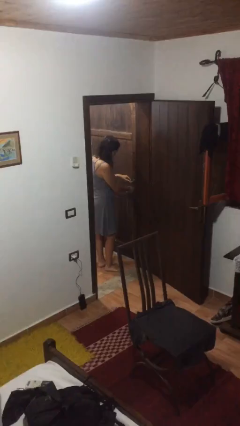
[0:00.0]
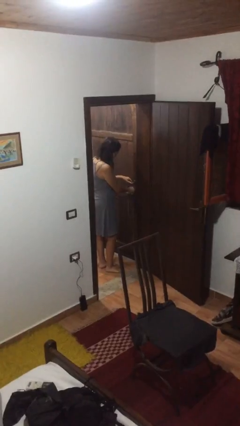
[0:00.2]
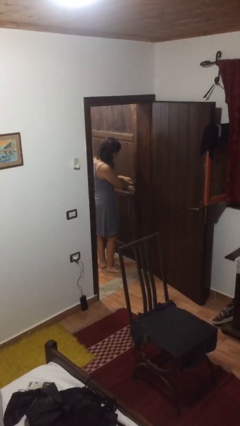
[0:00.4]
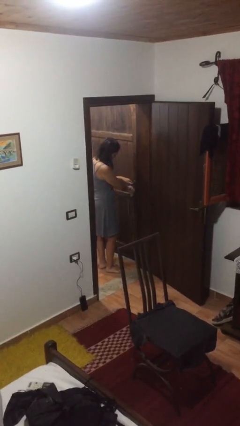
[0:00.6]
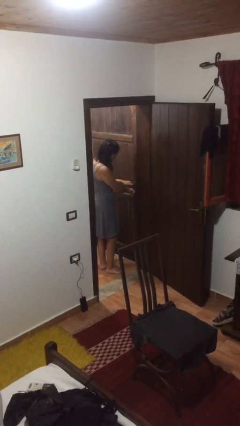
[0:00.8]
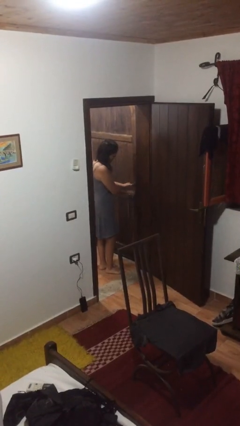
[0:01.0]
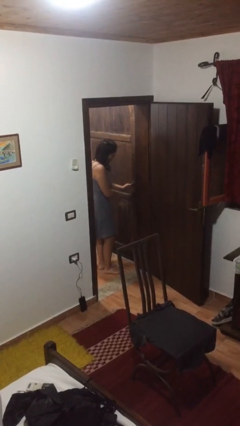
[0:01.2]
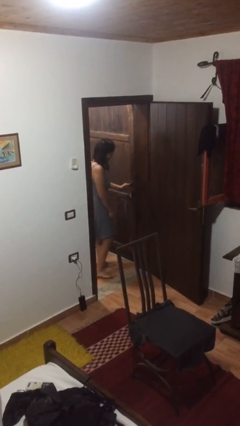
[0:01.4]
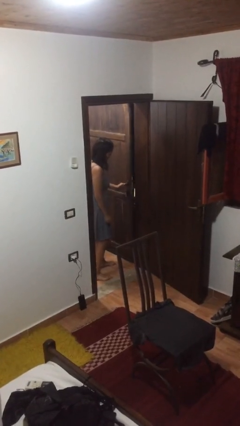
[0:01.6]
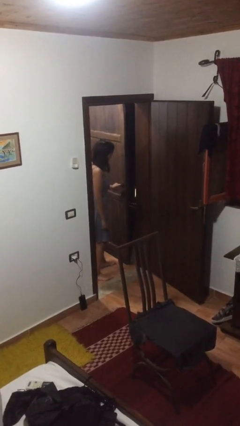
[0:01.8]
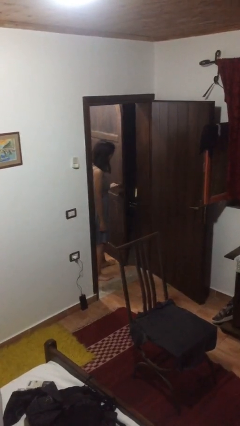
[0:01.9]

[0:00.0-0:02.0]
person unlocks door with keys

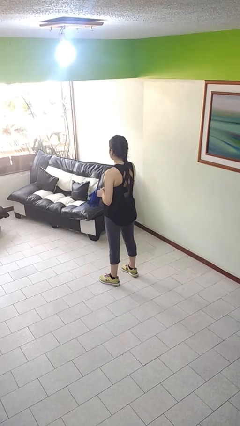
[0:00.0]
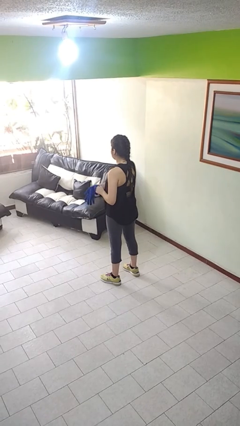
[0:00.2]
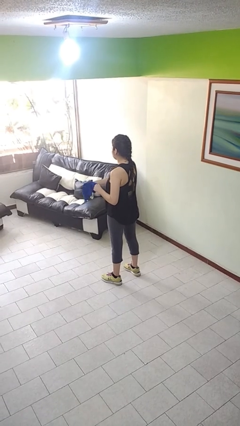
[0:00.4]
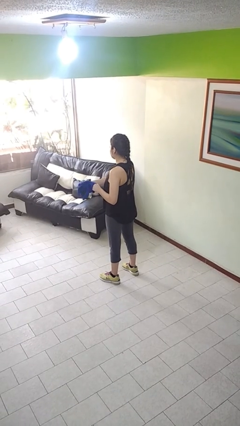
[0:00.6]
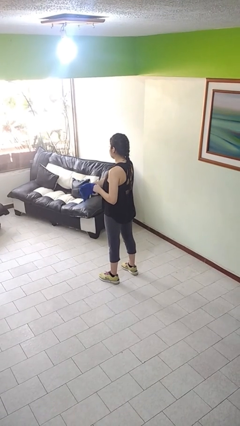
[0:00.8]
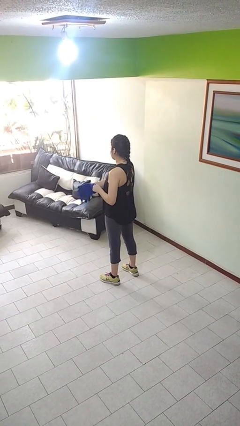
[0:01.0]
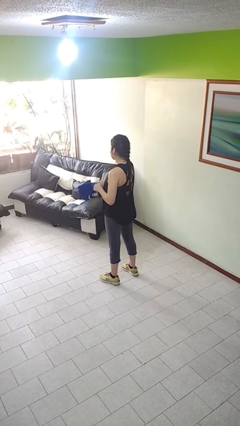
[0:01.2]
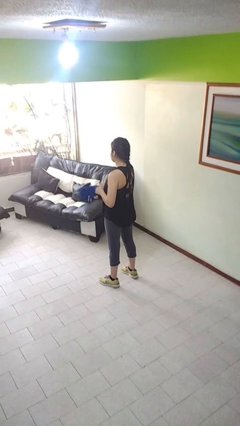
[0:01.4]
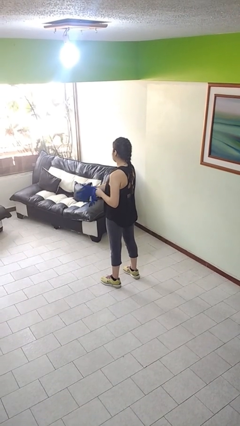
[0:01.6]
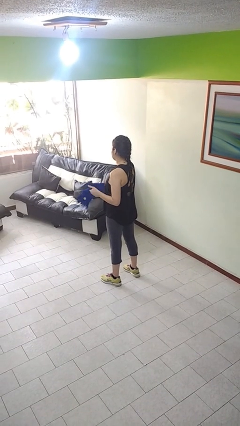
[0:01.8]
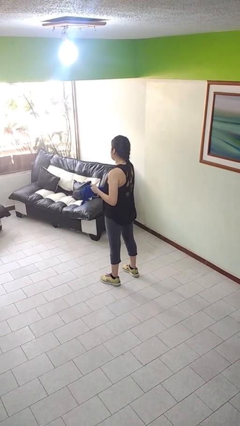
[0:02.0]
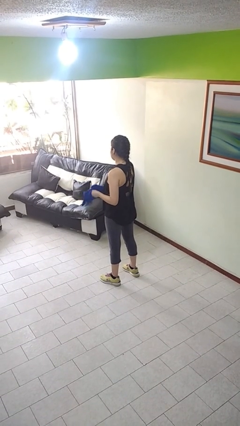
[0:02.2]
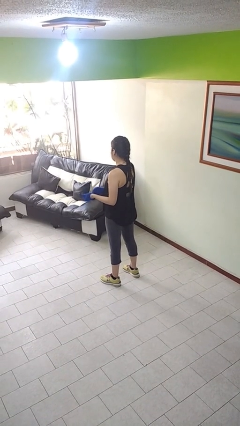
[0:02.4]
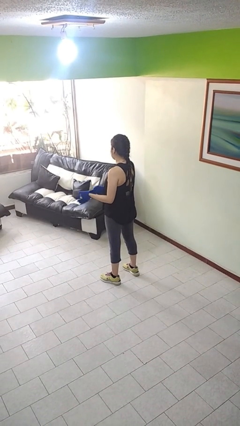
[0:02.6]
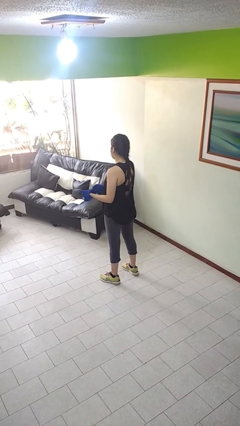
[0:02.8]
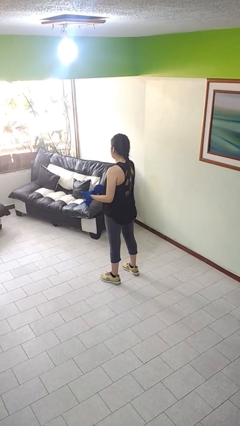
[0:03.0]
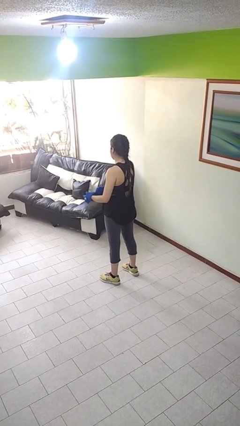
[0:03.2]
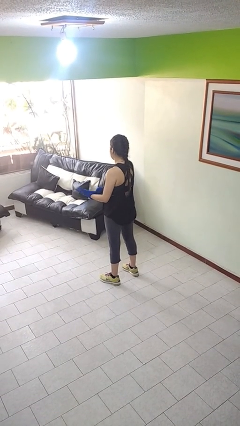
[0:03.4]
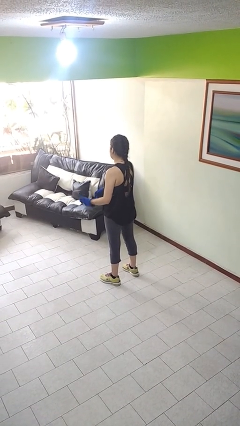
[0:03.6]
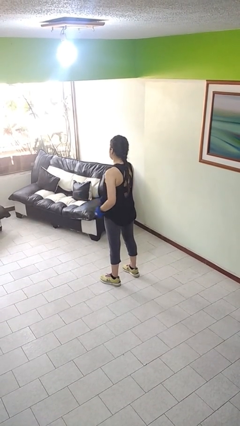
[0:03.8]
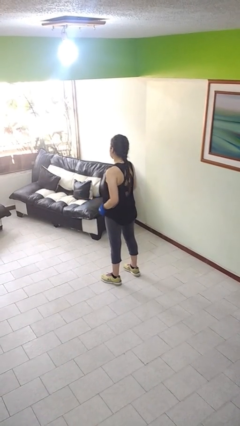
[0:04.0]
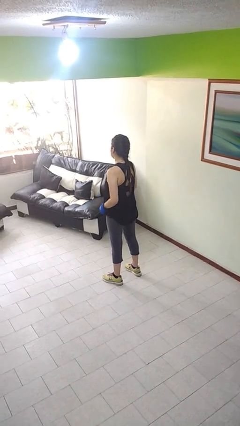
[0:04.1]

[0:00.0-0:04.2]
person puts on gloves

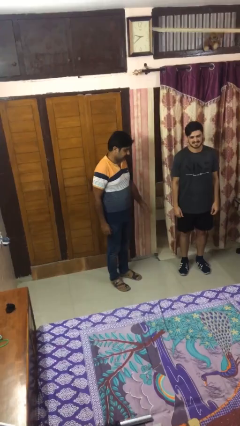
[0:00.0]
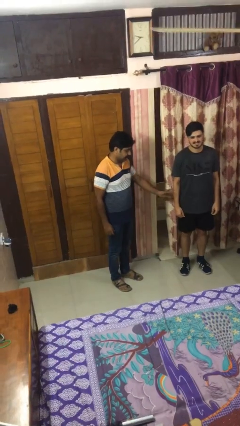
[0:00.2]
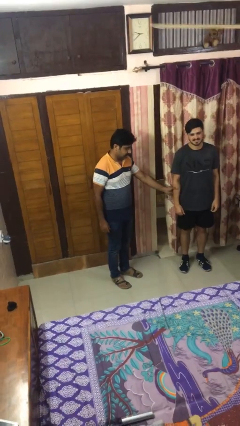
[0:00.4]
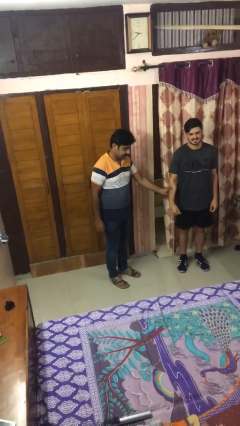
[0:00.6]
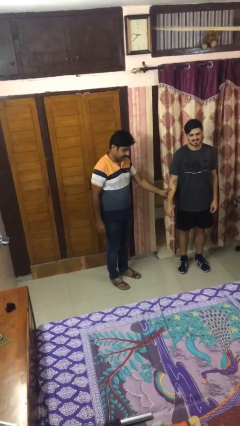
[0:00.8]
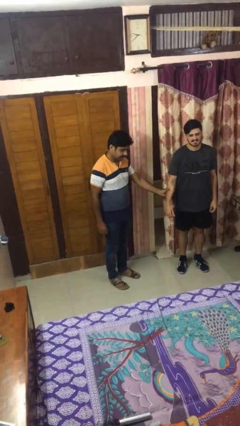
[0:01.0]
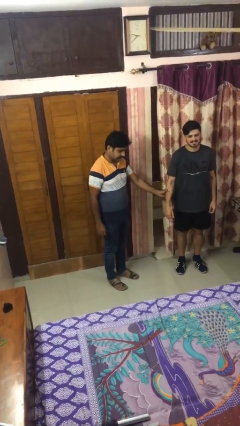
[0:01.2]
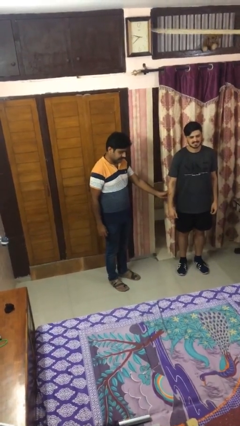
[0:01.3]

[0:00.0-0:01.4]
person grabs person by forearm

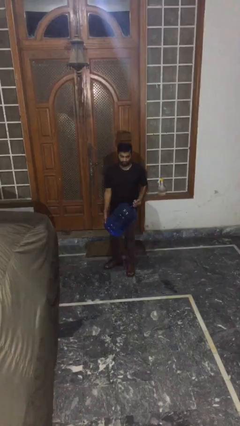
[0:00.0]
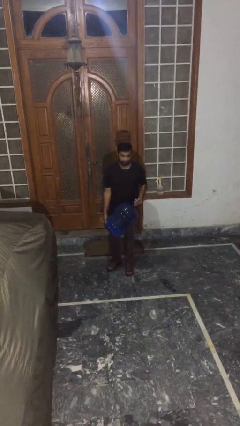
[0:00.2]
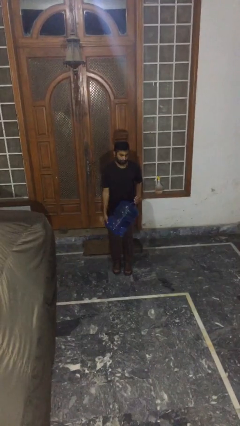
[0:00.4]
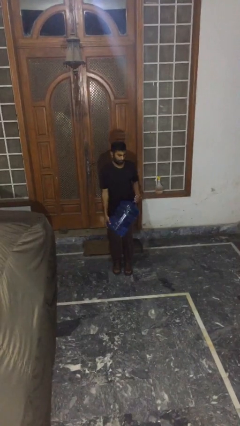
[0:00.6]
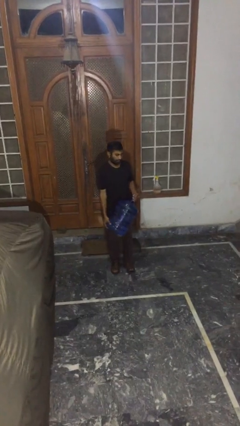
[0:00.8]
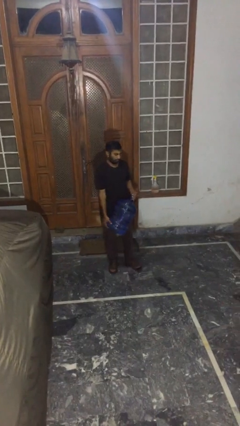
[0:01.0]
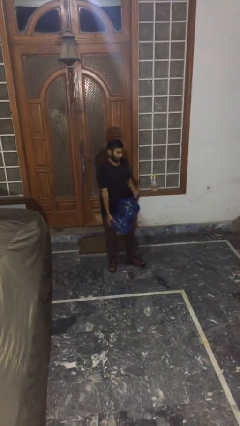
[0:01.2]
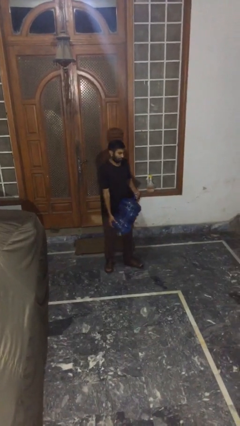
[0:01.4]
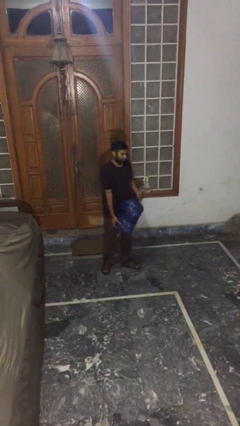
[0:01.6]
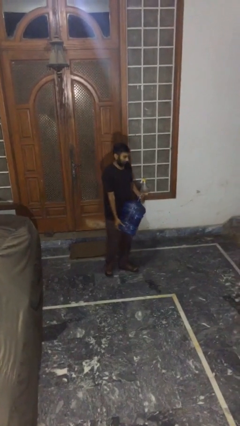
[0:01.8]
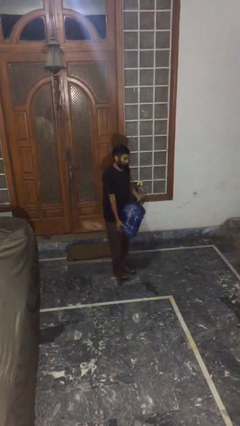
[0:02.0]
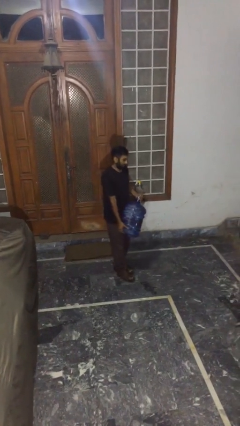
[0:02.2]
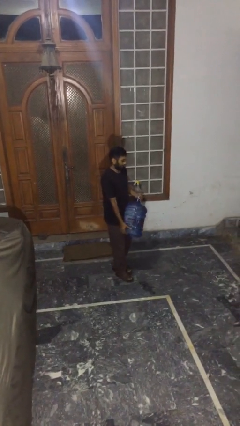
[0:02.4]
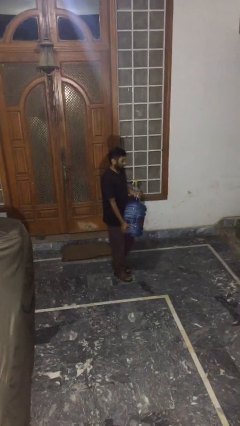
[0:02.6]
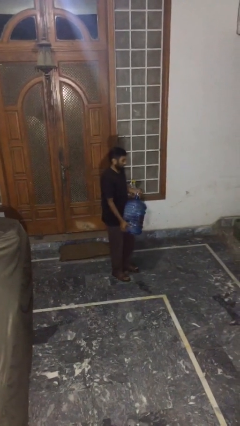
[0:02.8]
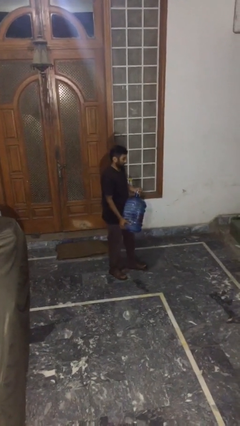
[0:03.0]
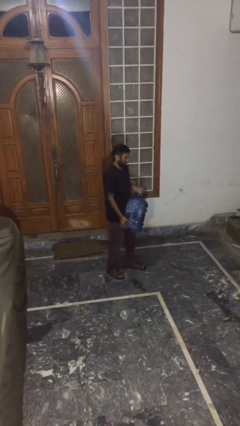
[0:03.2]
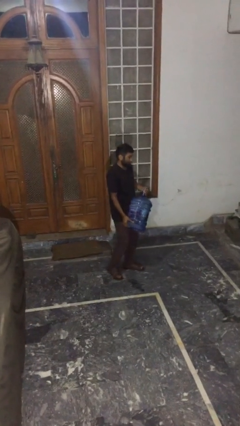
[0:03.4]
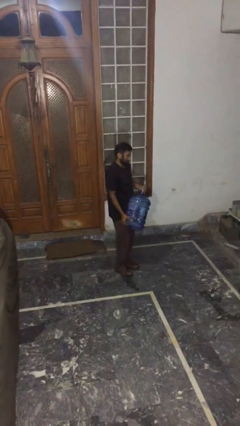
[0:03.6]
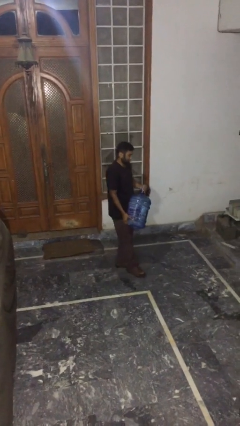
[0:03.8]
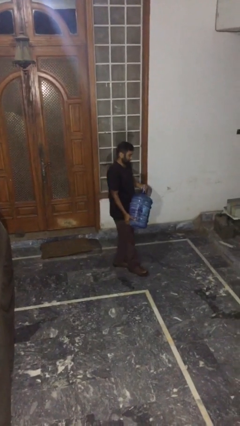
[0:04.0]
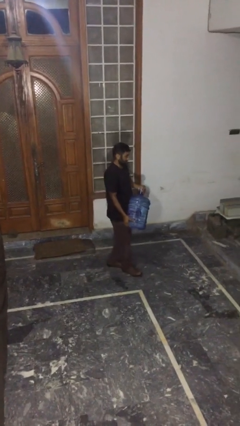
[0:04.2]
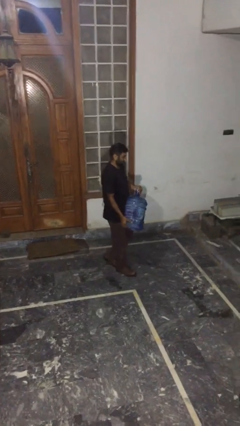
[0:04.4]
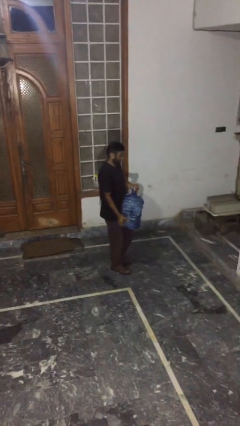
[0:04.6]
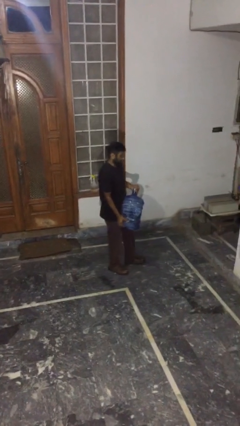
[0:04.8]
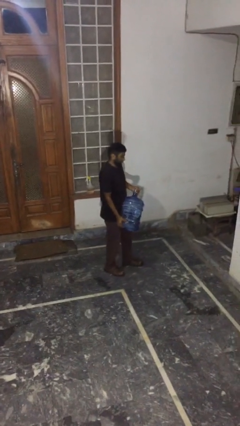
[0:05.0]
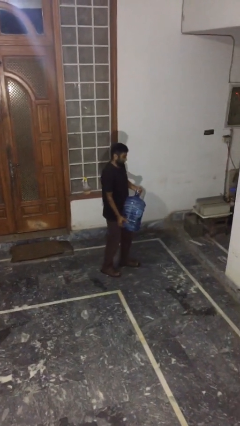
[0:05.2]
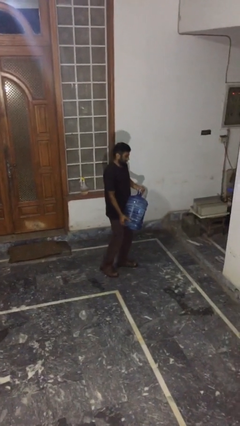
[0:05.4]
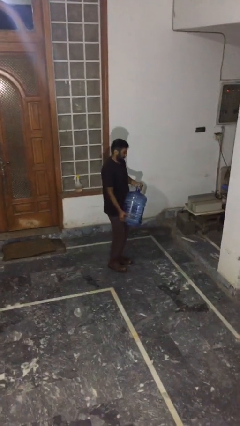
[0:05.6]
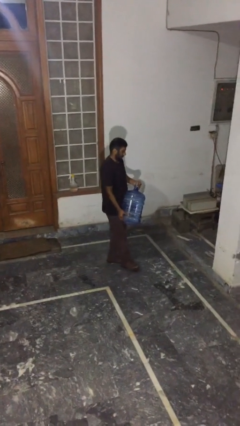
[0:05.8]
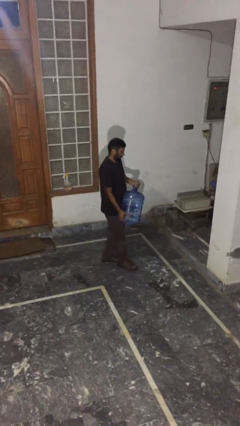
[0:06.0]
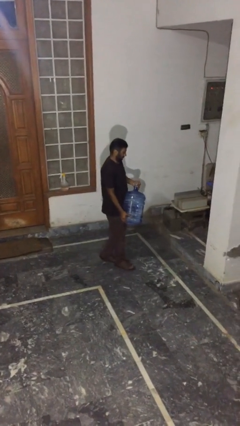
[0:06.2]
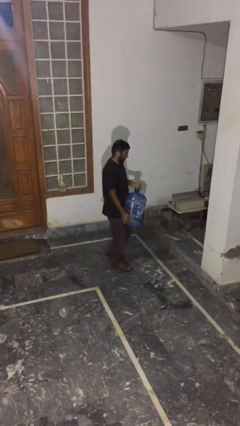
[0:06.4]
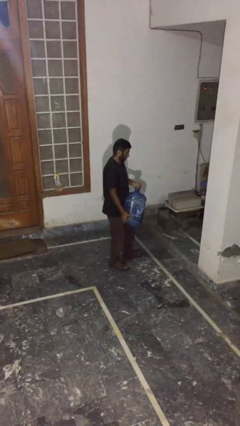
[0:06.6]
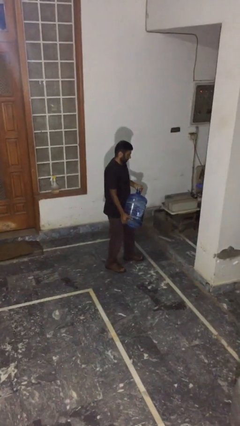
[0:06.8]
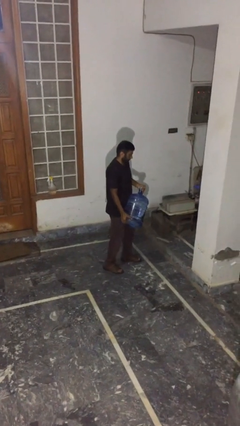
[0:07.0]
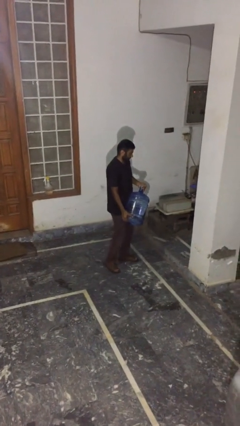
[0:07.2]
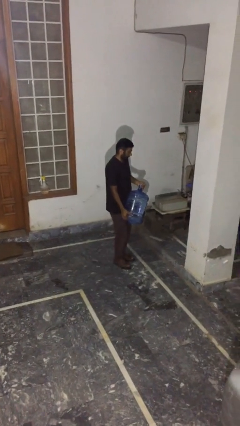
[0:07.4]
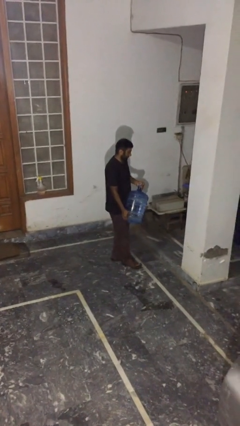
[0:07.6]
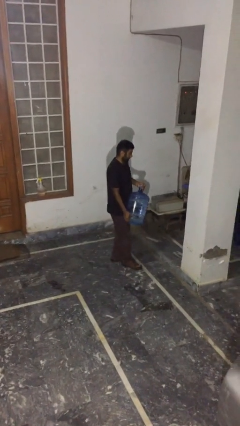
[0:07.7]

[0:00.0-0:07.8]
person carries heavy object

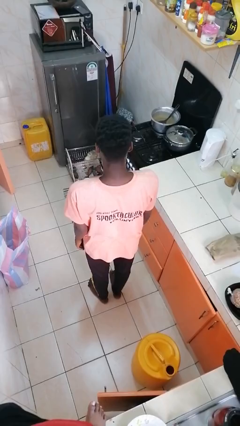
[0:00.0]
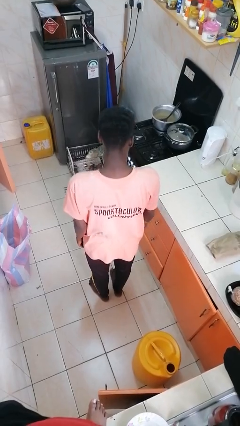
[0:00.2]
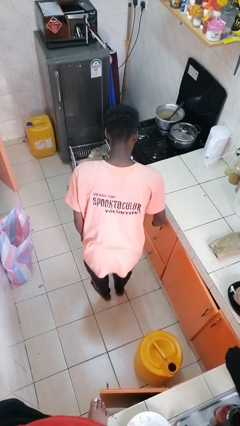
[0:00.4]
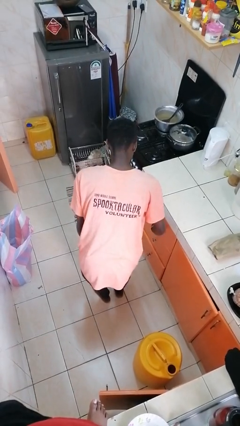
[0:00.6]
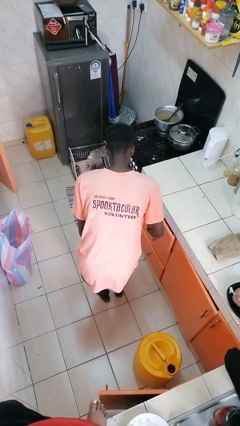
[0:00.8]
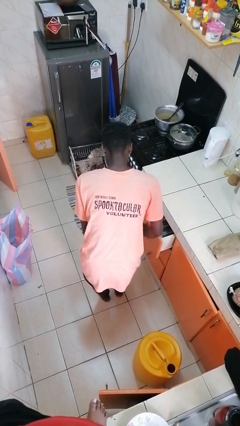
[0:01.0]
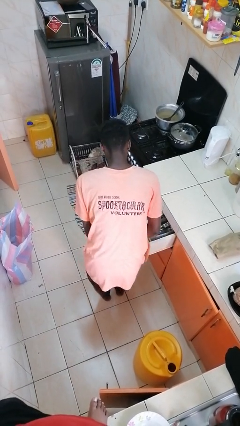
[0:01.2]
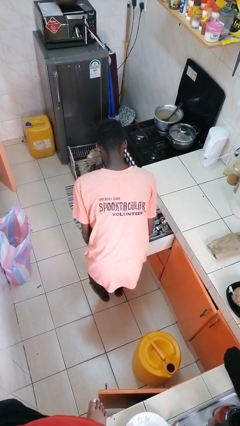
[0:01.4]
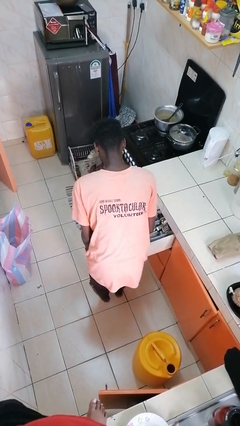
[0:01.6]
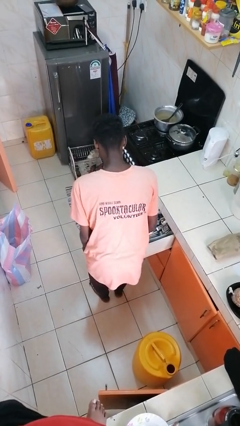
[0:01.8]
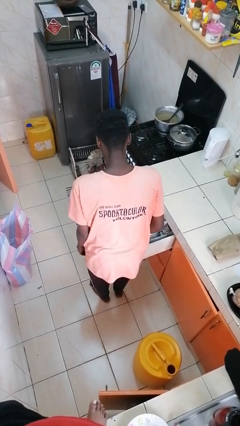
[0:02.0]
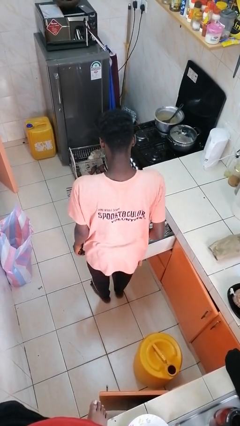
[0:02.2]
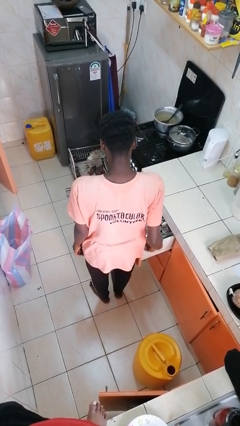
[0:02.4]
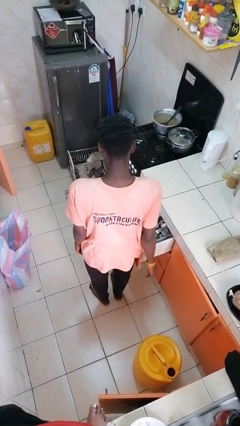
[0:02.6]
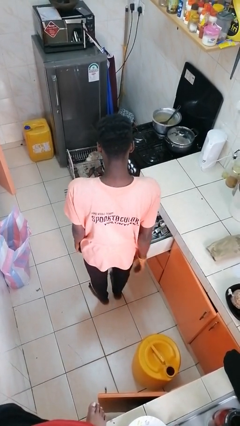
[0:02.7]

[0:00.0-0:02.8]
person opens kitchen drawer
